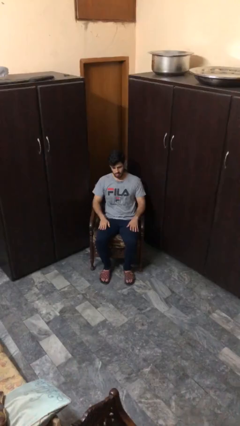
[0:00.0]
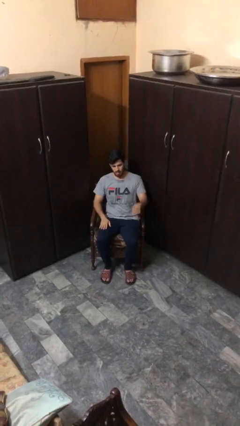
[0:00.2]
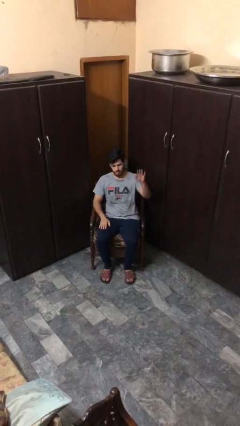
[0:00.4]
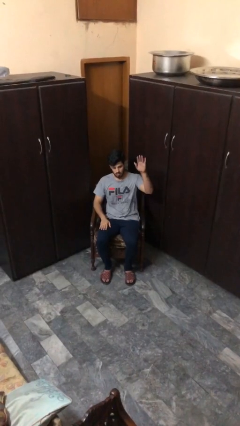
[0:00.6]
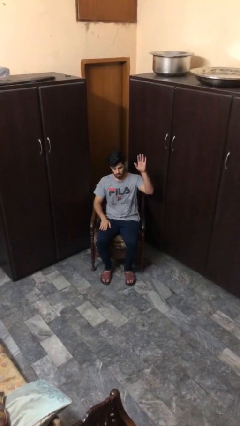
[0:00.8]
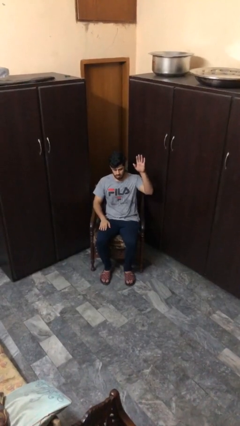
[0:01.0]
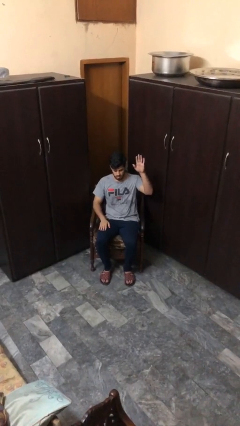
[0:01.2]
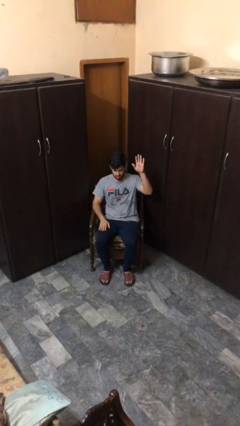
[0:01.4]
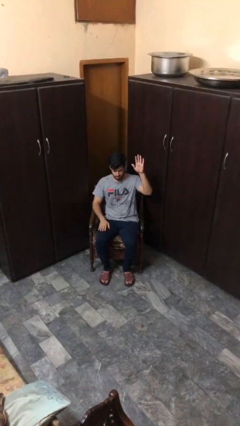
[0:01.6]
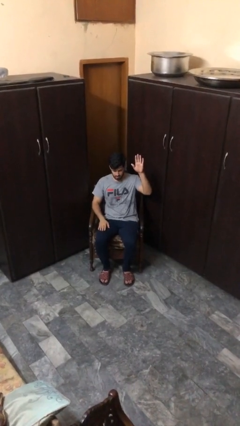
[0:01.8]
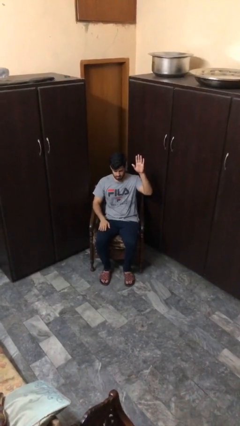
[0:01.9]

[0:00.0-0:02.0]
person gestures raise hand

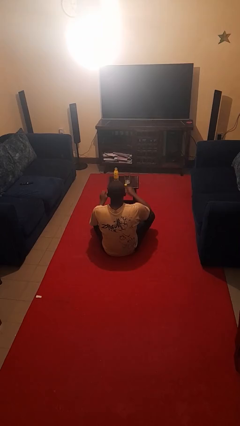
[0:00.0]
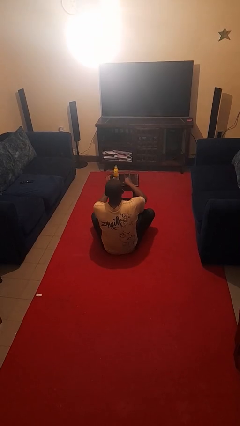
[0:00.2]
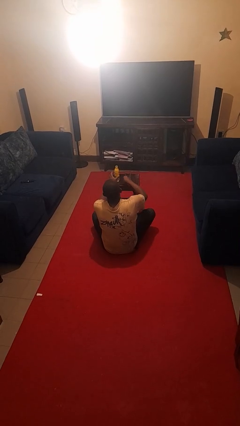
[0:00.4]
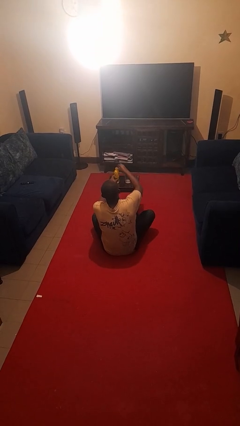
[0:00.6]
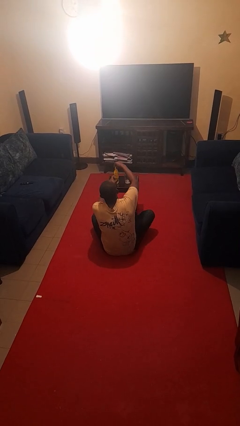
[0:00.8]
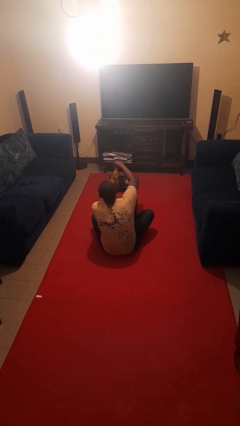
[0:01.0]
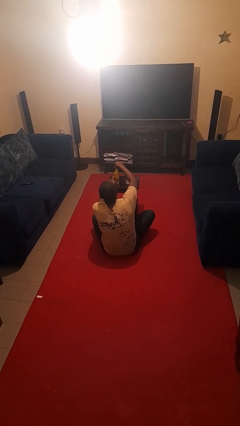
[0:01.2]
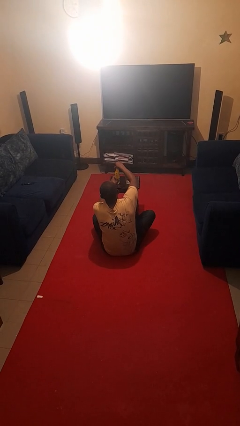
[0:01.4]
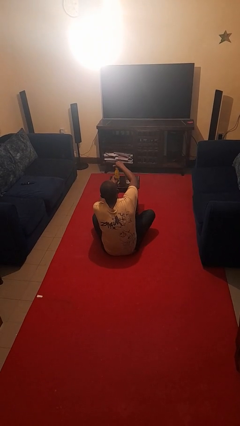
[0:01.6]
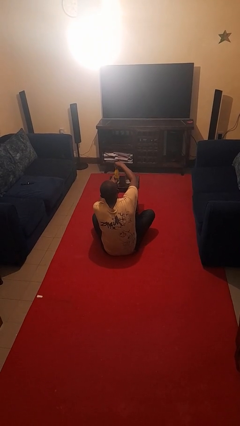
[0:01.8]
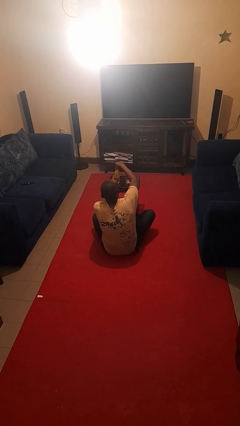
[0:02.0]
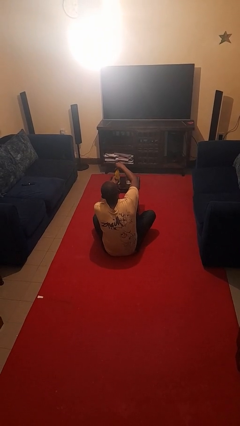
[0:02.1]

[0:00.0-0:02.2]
person screws lid to bottle

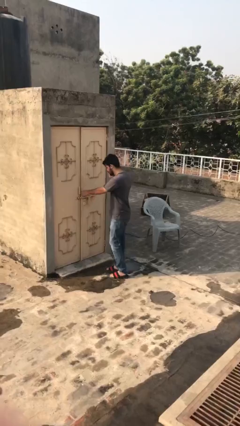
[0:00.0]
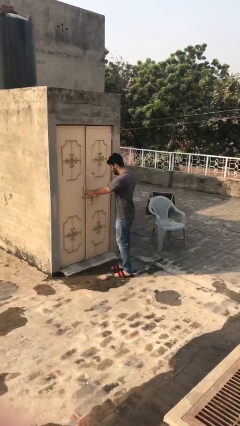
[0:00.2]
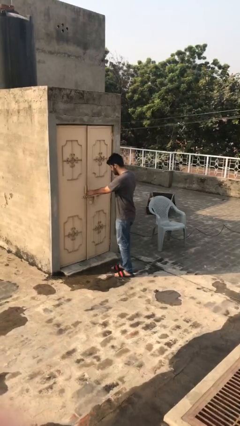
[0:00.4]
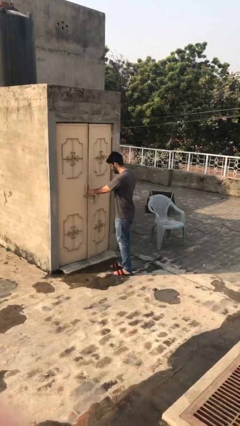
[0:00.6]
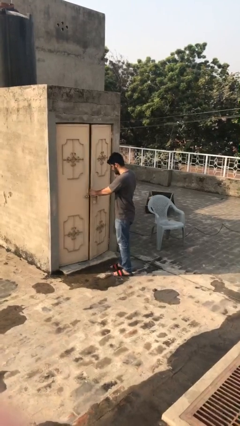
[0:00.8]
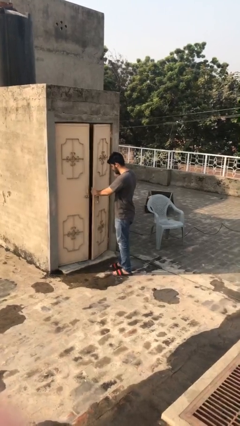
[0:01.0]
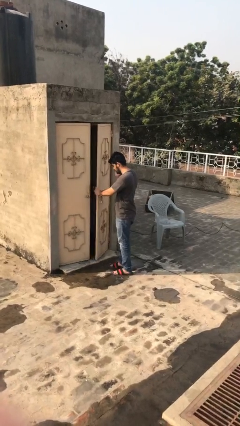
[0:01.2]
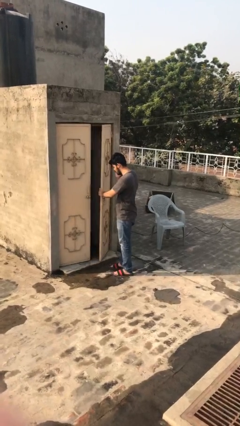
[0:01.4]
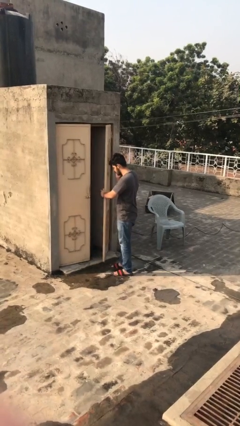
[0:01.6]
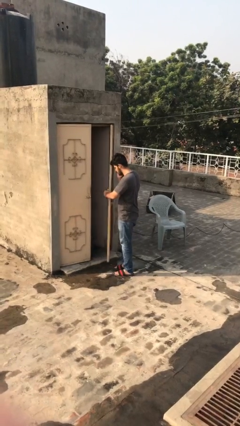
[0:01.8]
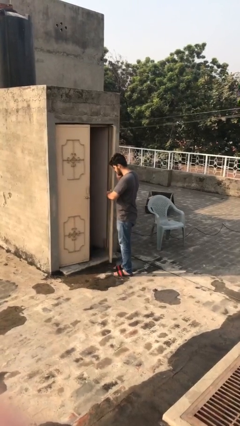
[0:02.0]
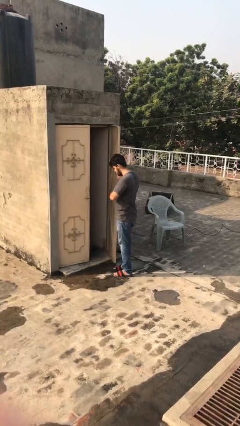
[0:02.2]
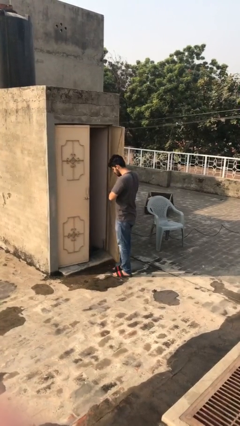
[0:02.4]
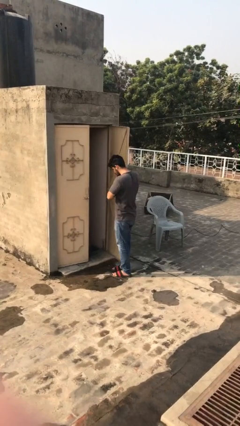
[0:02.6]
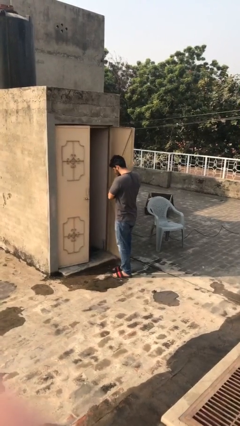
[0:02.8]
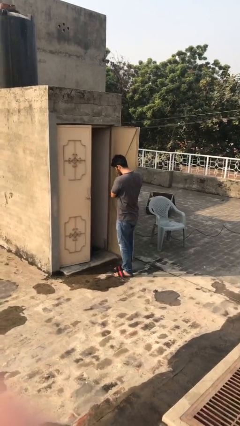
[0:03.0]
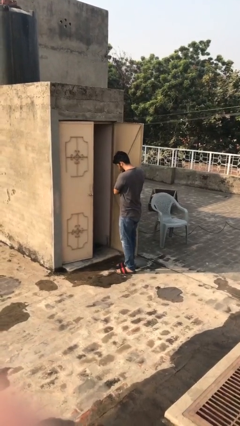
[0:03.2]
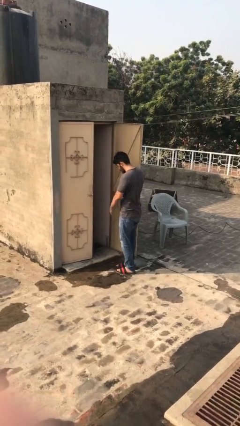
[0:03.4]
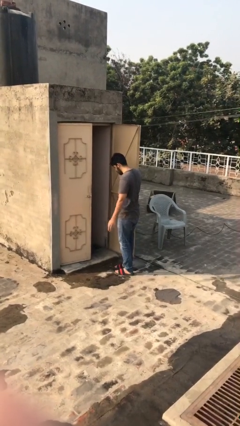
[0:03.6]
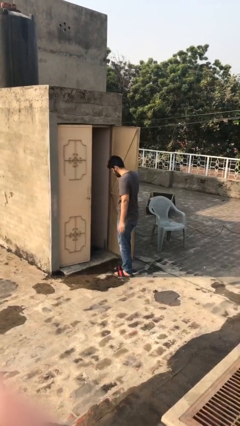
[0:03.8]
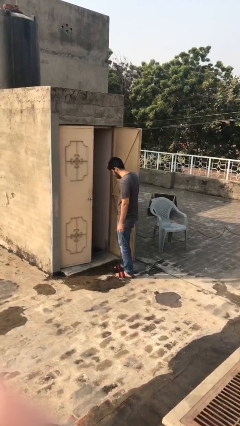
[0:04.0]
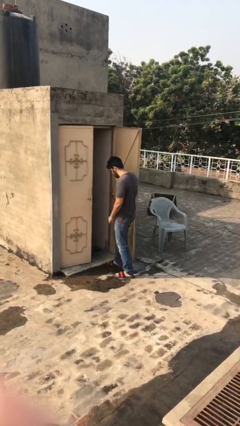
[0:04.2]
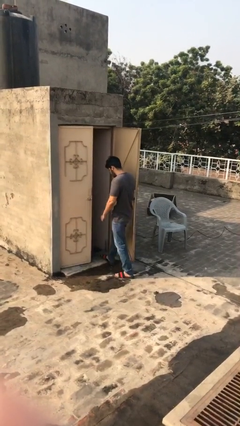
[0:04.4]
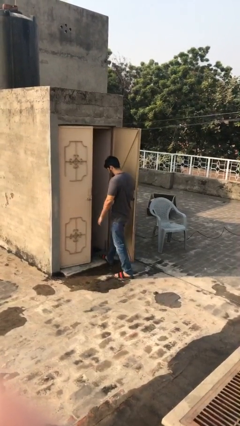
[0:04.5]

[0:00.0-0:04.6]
person opens facility door

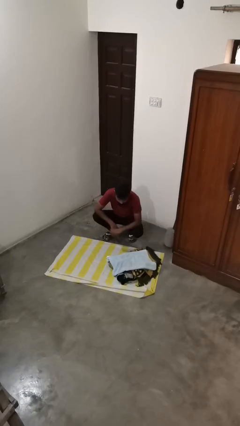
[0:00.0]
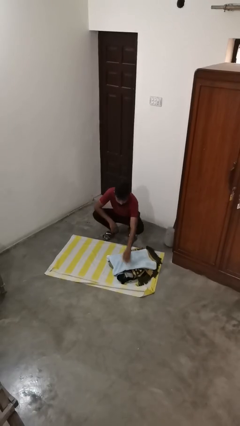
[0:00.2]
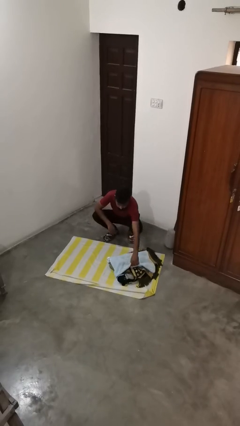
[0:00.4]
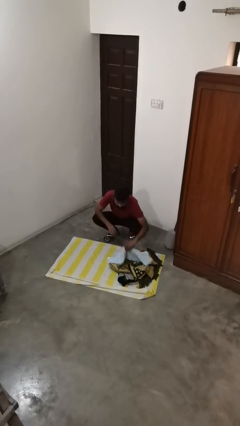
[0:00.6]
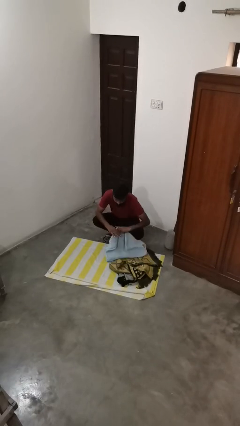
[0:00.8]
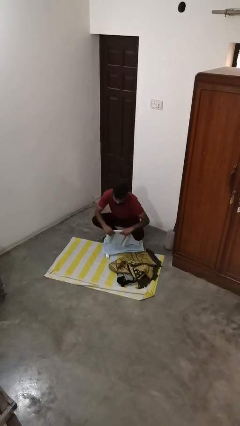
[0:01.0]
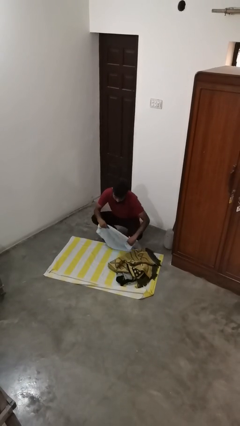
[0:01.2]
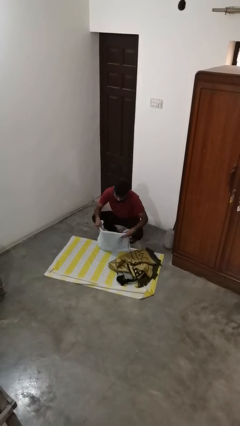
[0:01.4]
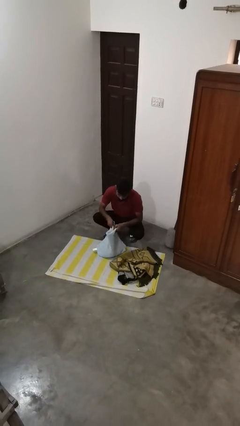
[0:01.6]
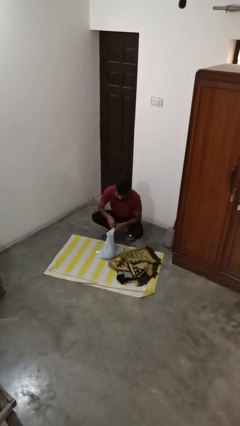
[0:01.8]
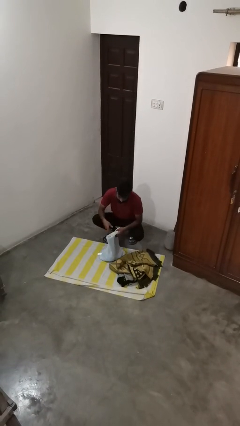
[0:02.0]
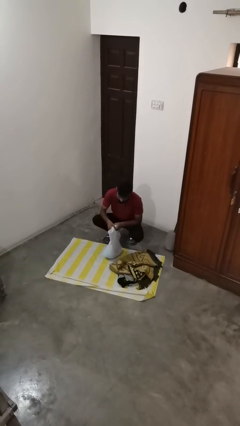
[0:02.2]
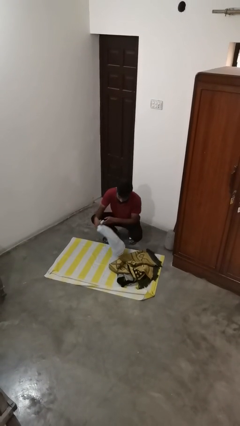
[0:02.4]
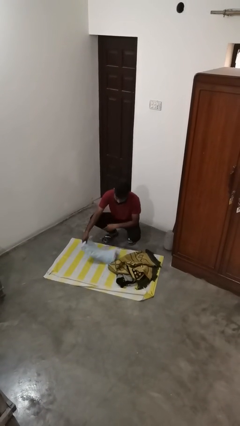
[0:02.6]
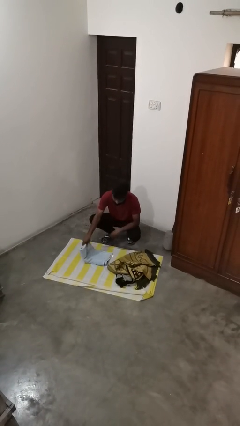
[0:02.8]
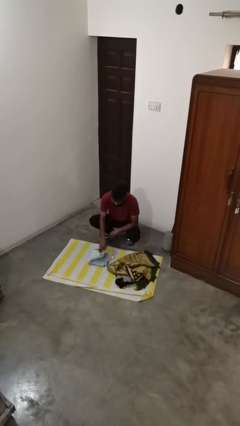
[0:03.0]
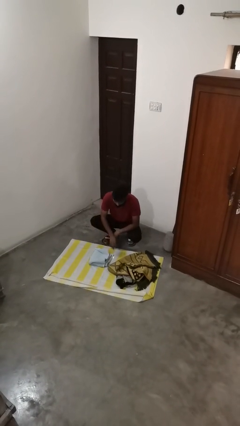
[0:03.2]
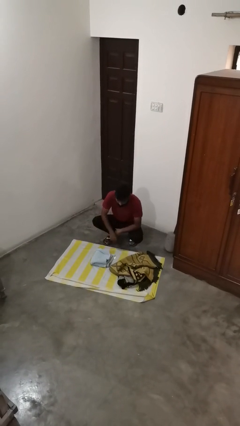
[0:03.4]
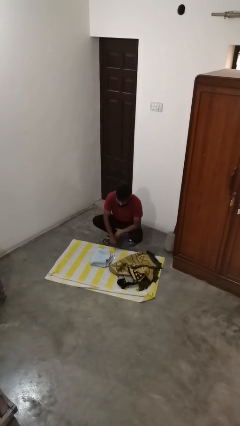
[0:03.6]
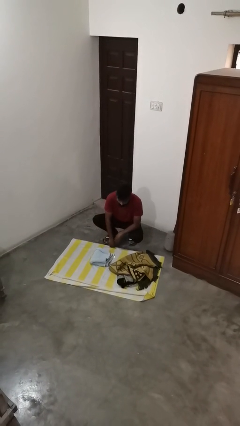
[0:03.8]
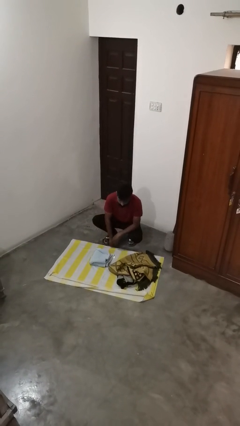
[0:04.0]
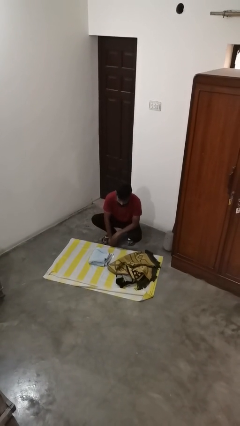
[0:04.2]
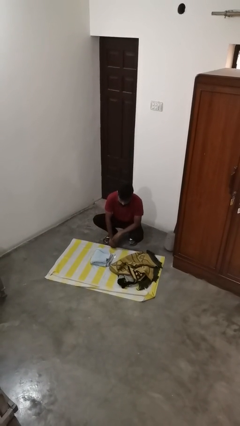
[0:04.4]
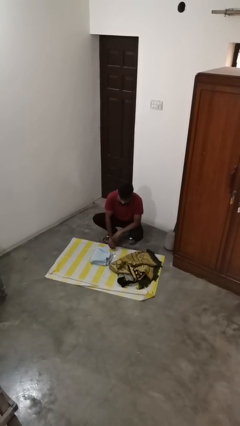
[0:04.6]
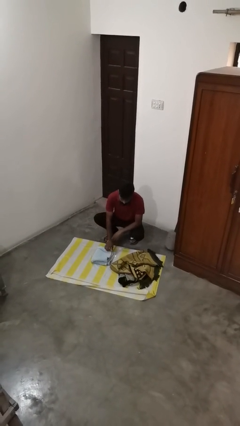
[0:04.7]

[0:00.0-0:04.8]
person folds towel

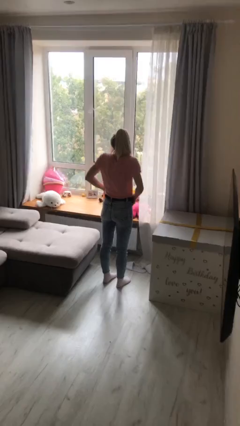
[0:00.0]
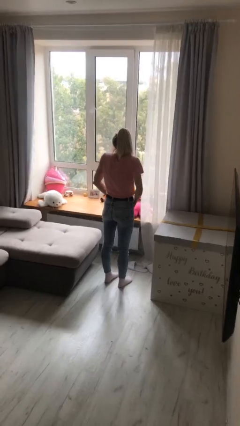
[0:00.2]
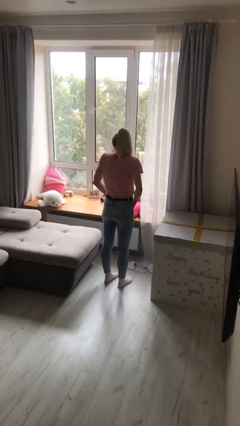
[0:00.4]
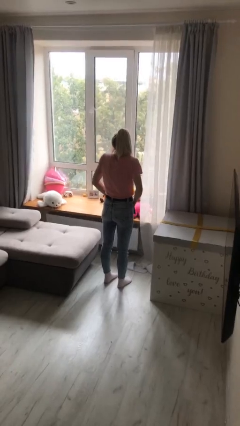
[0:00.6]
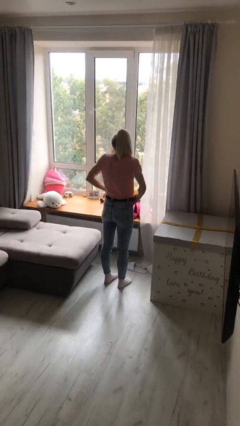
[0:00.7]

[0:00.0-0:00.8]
person puts hands in back pockets

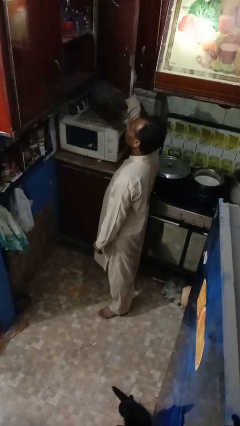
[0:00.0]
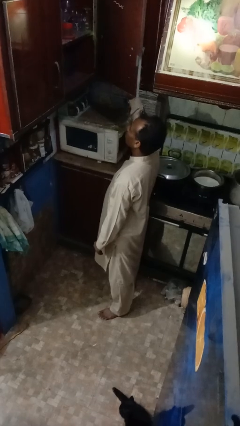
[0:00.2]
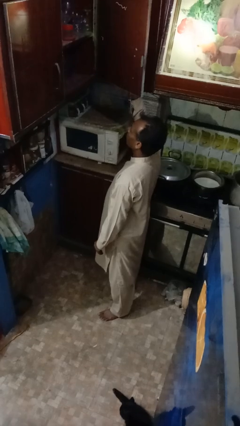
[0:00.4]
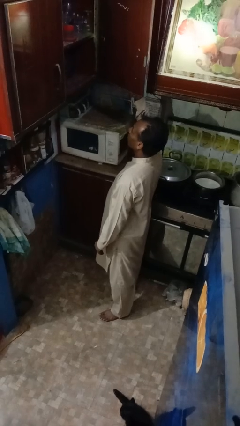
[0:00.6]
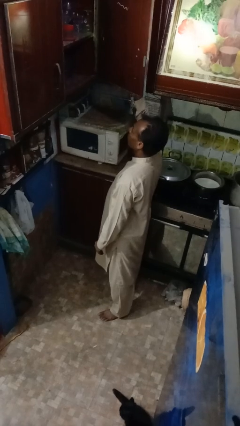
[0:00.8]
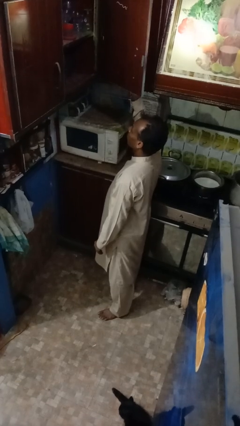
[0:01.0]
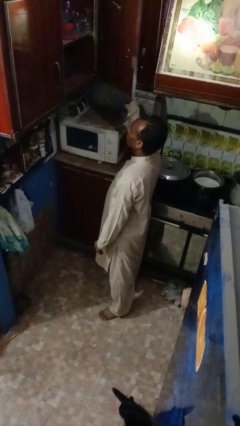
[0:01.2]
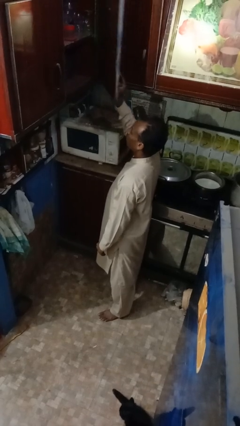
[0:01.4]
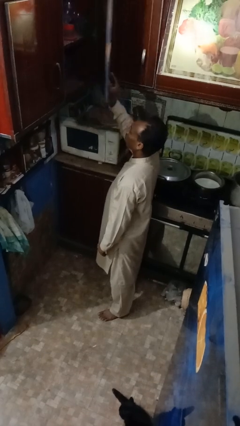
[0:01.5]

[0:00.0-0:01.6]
person closes cabinet

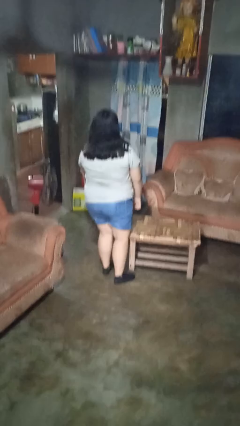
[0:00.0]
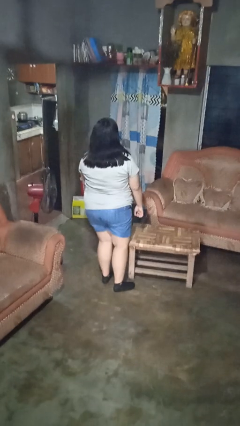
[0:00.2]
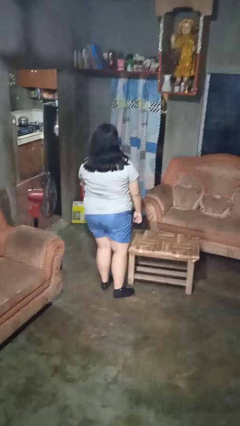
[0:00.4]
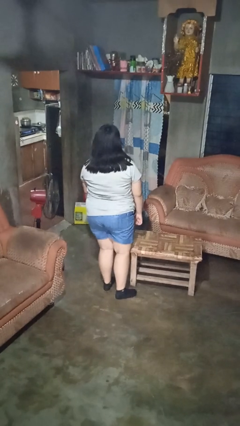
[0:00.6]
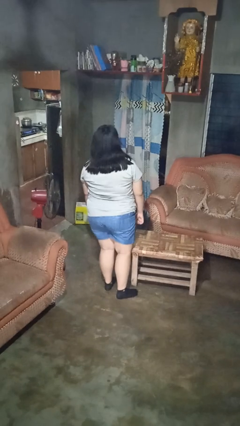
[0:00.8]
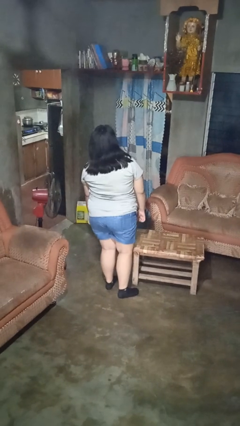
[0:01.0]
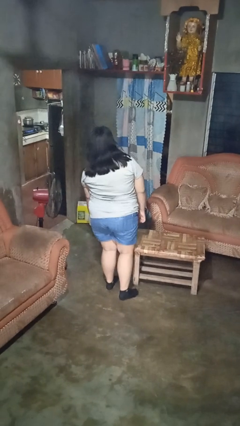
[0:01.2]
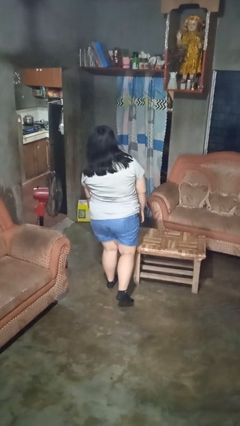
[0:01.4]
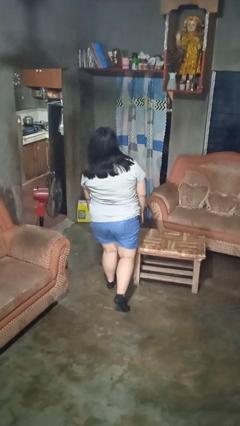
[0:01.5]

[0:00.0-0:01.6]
person bumps into table
